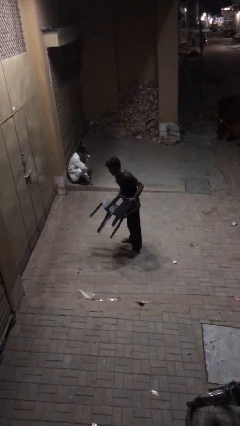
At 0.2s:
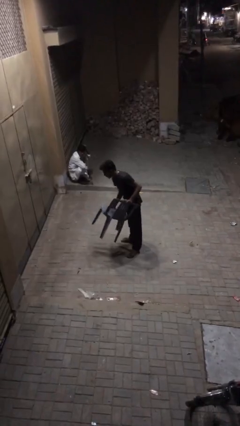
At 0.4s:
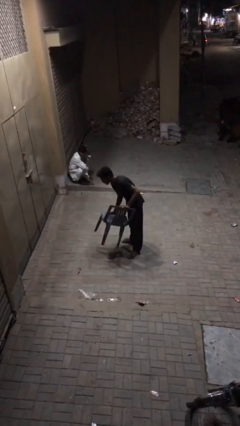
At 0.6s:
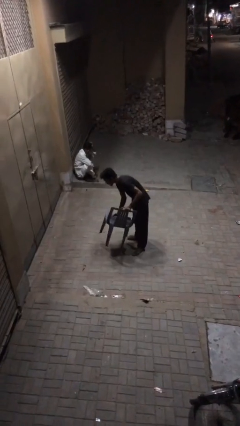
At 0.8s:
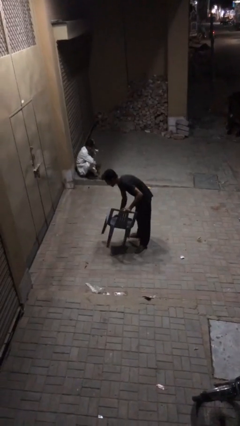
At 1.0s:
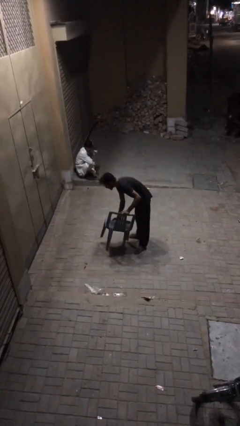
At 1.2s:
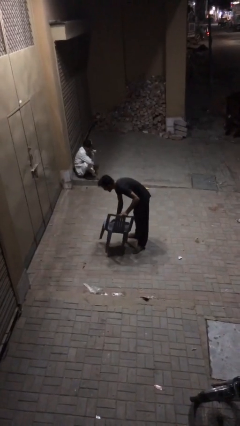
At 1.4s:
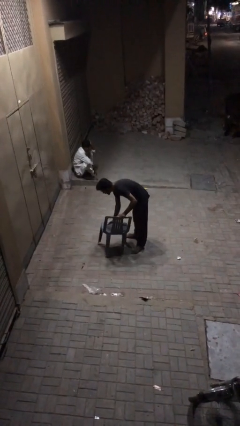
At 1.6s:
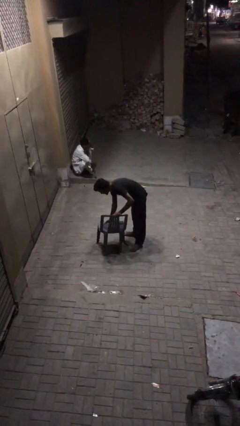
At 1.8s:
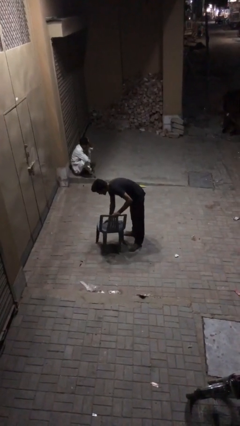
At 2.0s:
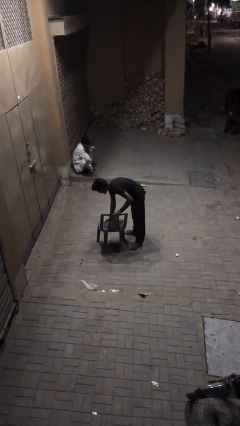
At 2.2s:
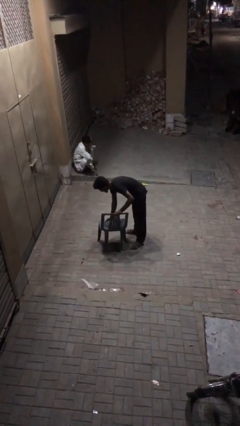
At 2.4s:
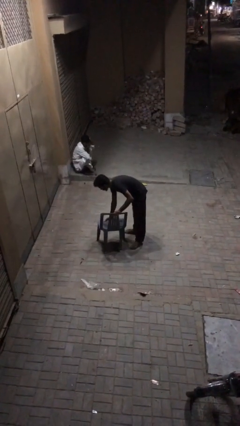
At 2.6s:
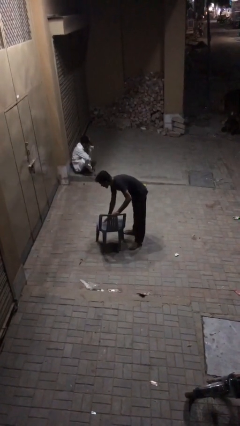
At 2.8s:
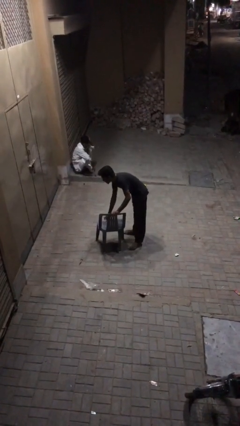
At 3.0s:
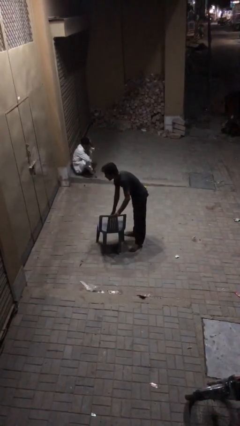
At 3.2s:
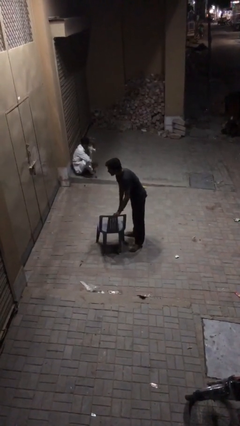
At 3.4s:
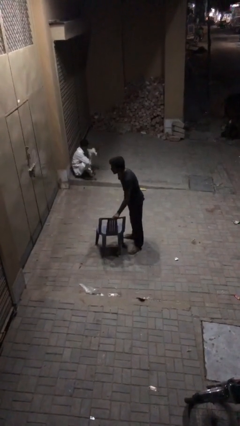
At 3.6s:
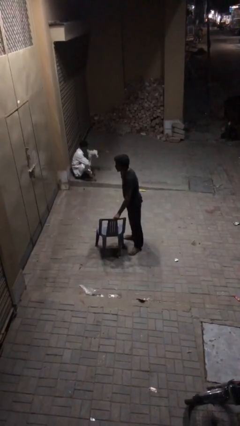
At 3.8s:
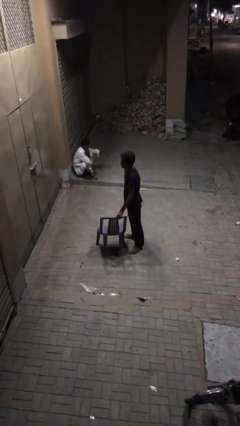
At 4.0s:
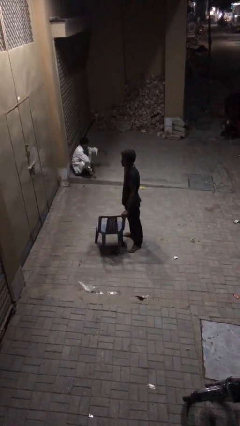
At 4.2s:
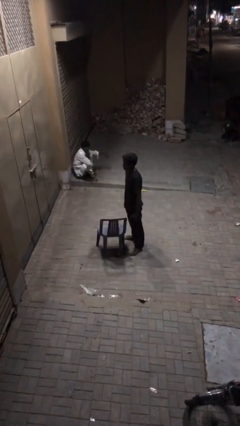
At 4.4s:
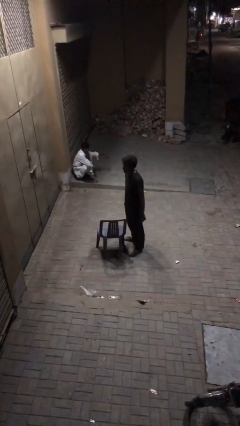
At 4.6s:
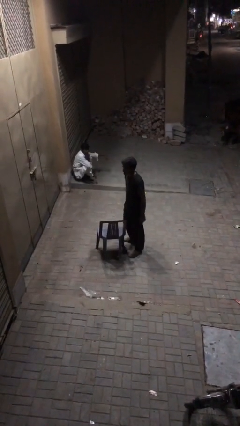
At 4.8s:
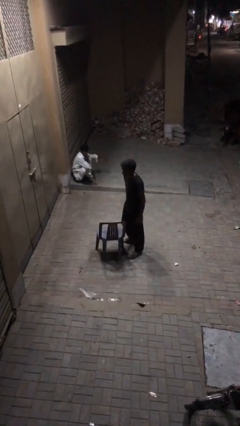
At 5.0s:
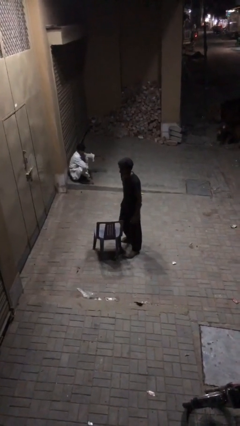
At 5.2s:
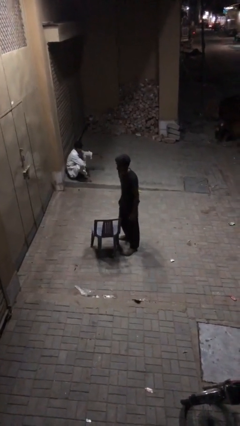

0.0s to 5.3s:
person puts down object on floor

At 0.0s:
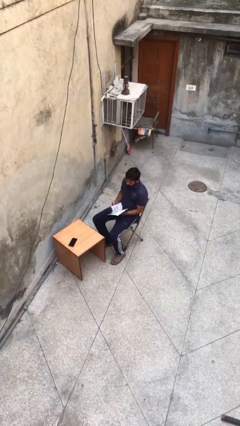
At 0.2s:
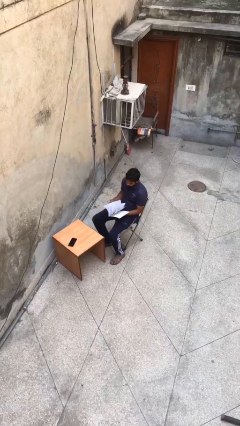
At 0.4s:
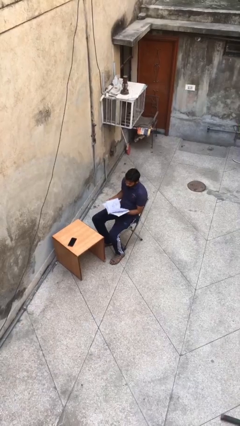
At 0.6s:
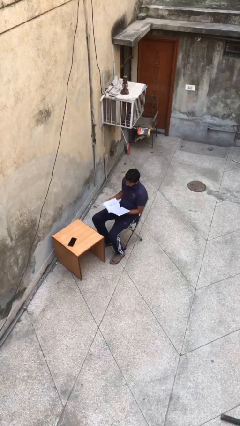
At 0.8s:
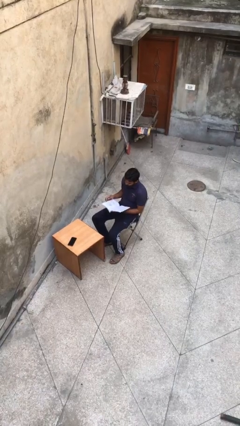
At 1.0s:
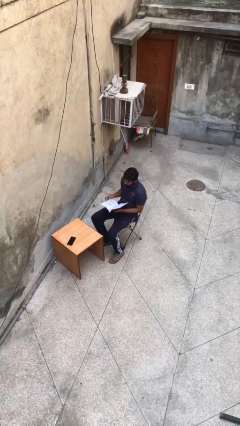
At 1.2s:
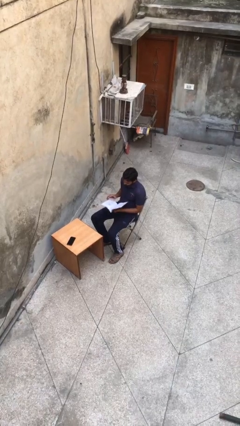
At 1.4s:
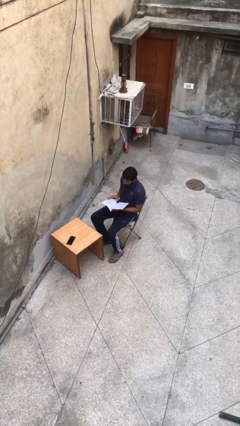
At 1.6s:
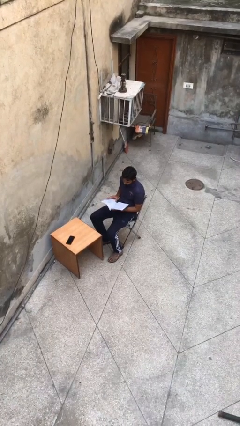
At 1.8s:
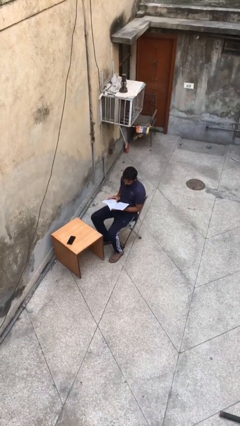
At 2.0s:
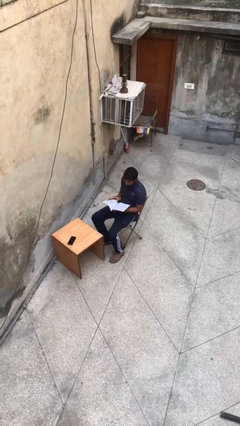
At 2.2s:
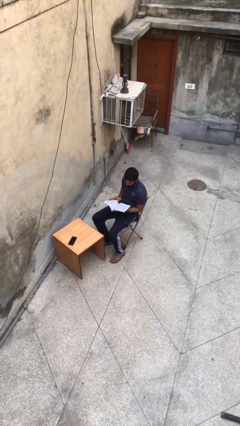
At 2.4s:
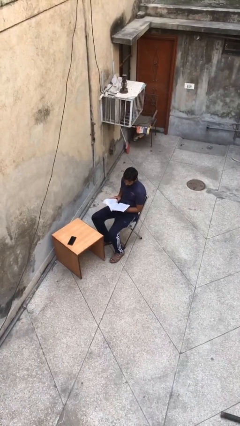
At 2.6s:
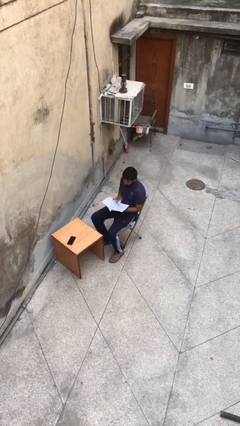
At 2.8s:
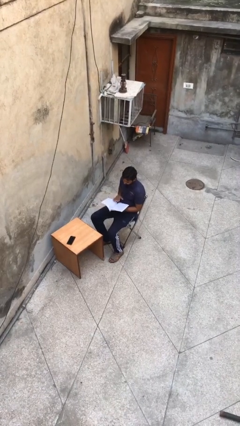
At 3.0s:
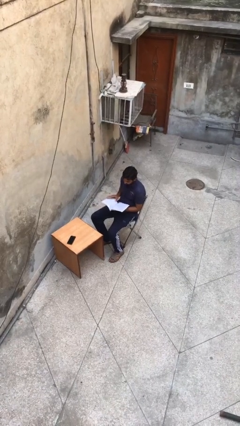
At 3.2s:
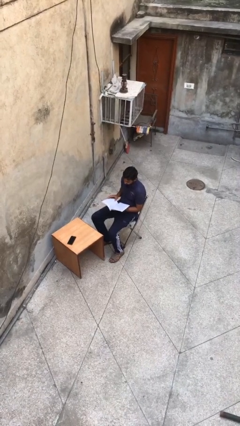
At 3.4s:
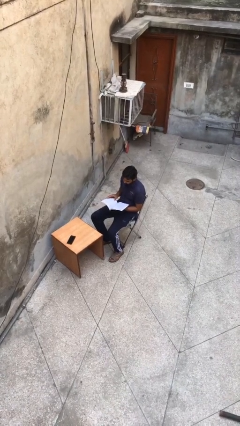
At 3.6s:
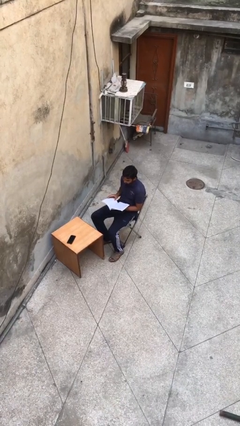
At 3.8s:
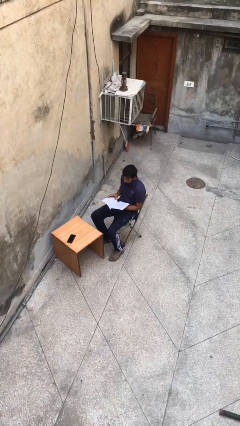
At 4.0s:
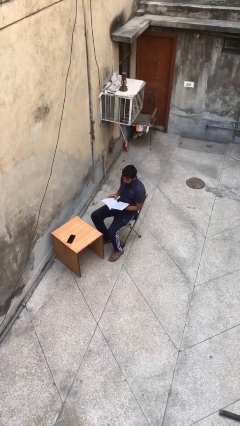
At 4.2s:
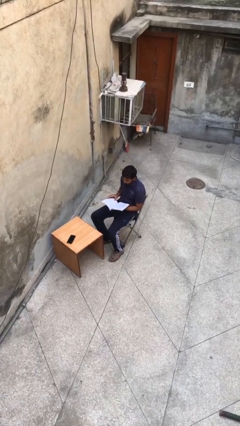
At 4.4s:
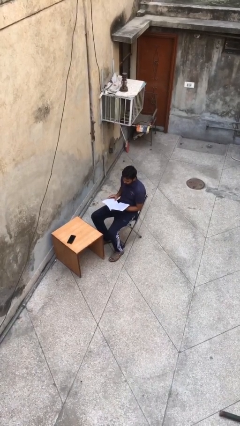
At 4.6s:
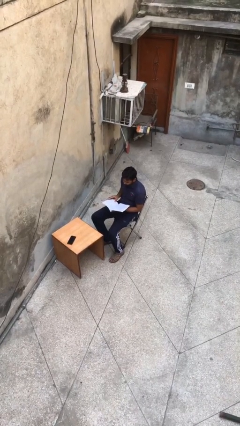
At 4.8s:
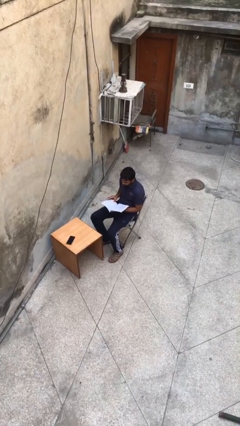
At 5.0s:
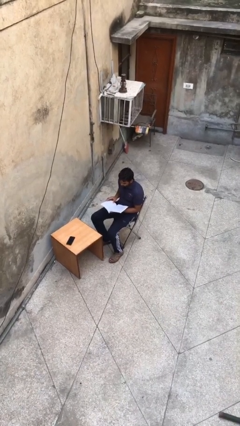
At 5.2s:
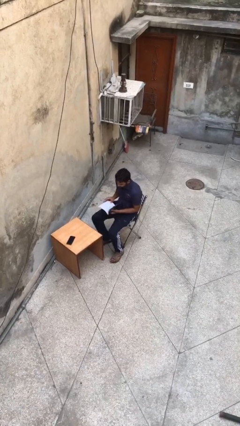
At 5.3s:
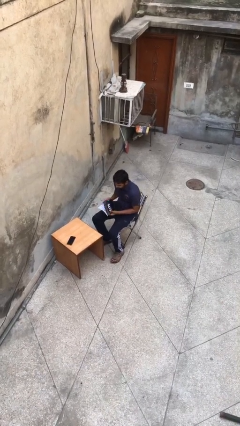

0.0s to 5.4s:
person reads document

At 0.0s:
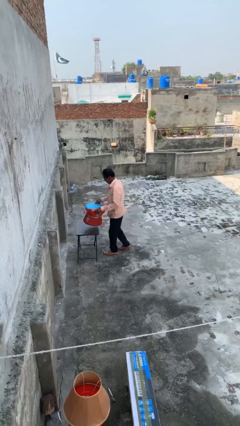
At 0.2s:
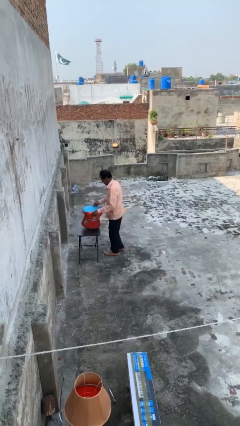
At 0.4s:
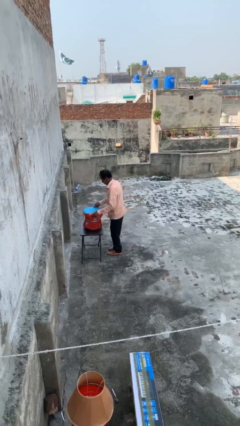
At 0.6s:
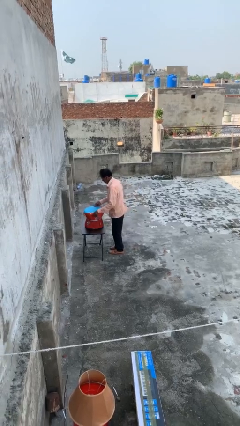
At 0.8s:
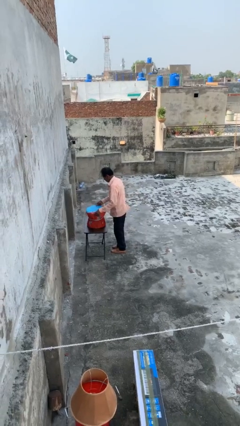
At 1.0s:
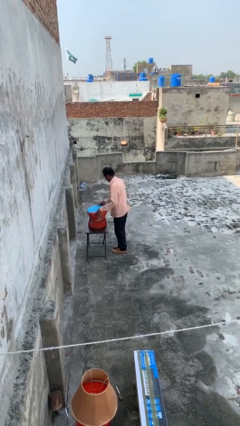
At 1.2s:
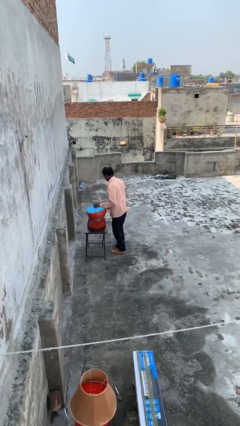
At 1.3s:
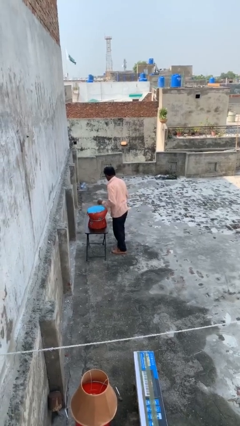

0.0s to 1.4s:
person puts down object on table

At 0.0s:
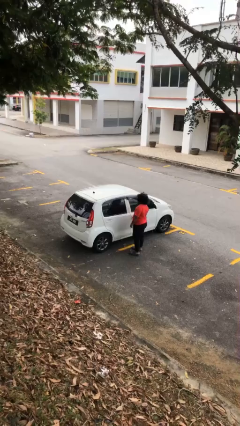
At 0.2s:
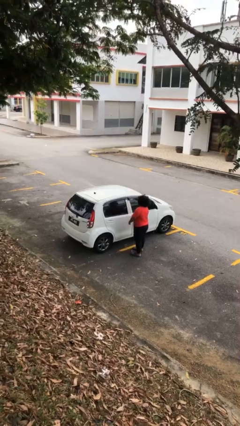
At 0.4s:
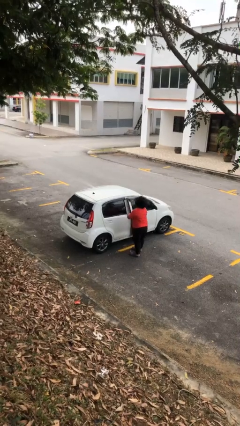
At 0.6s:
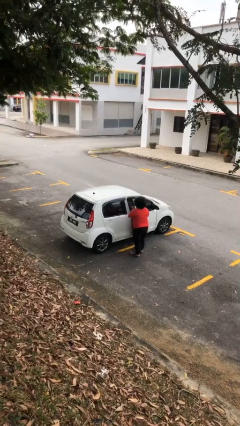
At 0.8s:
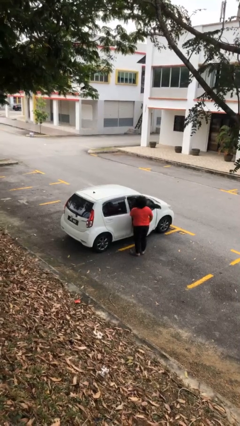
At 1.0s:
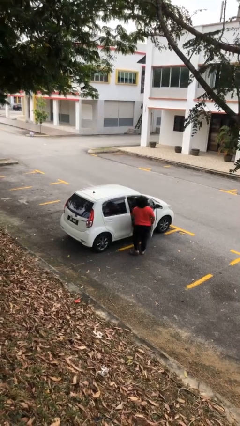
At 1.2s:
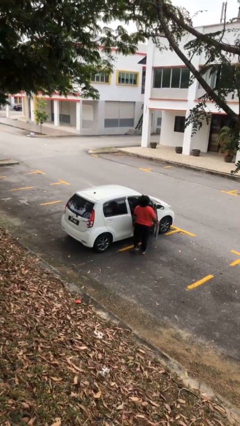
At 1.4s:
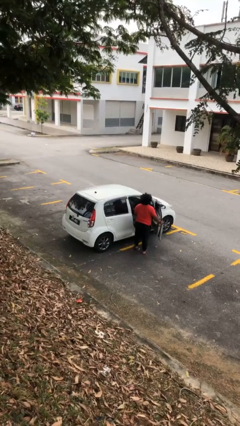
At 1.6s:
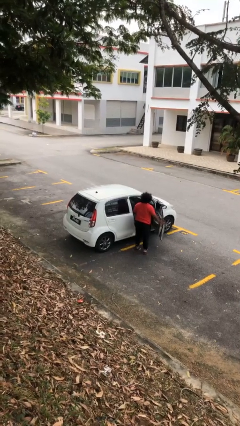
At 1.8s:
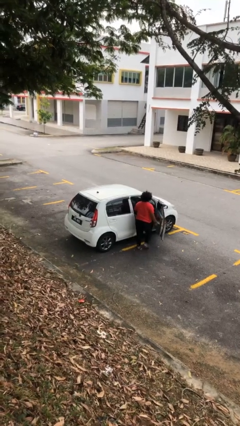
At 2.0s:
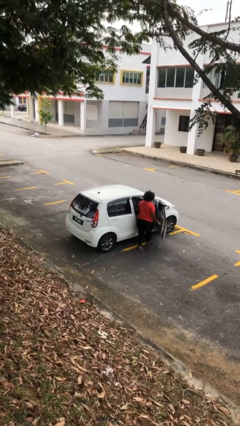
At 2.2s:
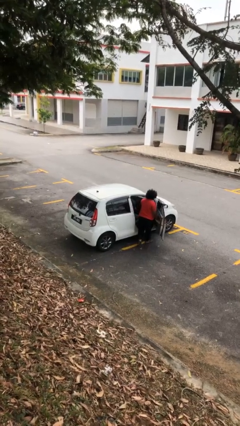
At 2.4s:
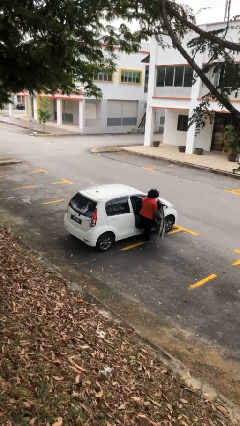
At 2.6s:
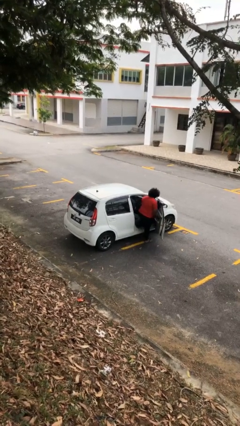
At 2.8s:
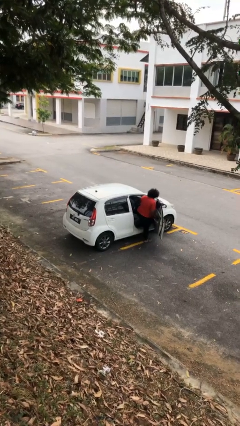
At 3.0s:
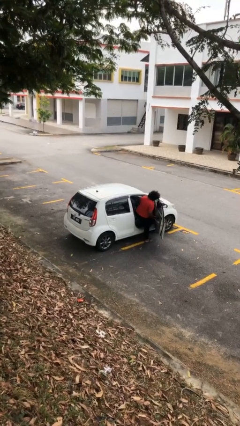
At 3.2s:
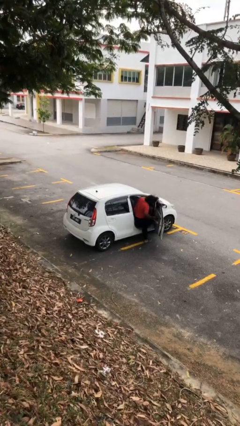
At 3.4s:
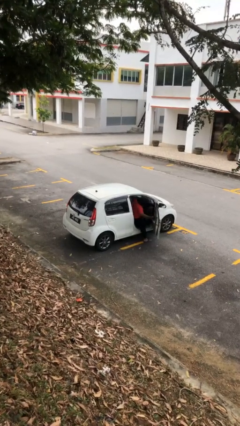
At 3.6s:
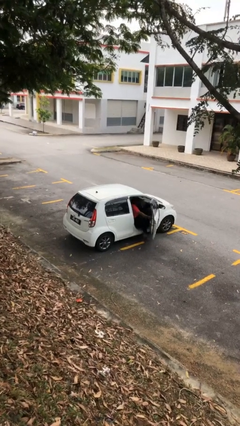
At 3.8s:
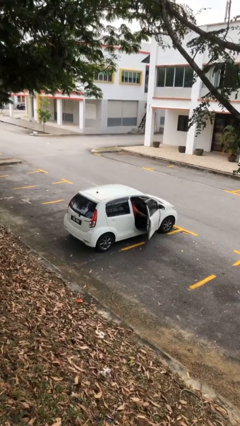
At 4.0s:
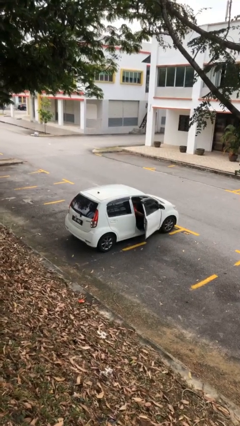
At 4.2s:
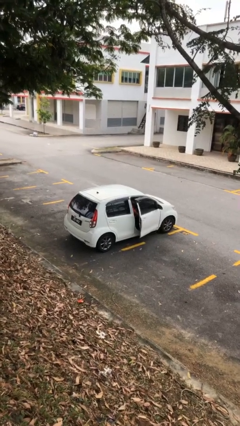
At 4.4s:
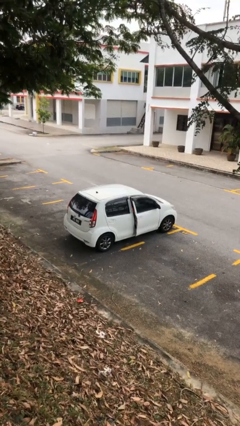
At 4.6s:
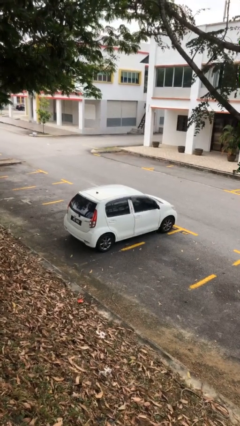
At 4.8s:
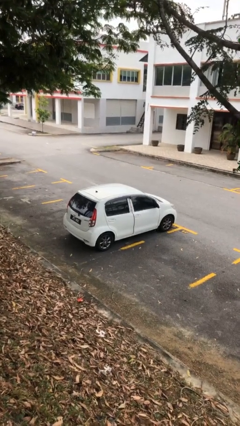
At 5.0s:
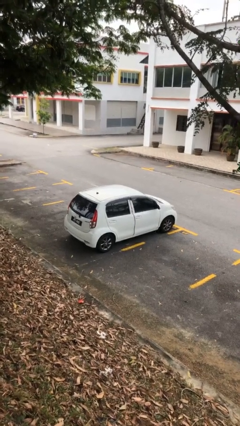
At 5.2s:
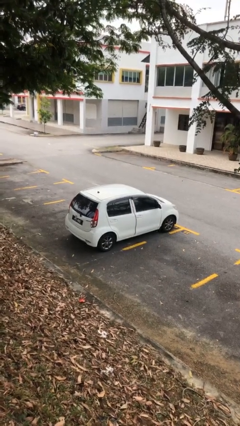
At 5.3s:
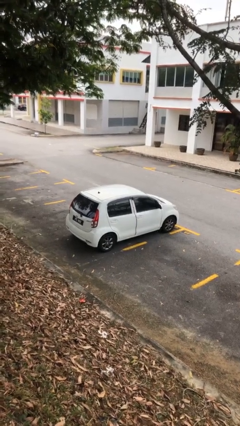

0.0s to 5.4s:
car picks up person

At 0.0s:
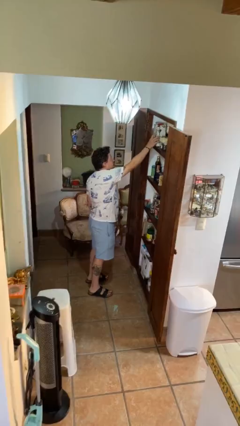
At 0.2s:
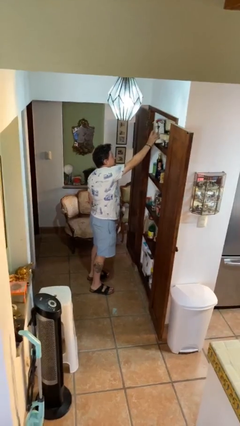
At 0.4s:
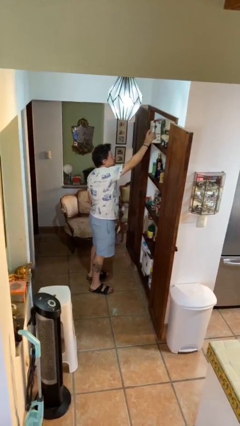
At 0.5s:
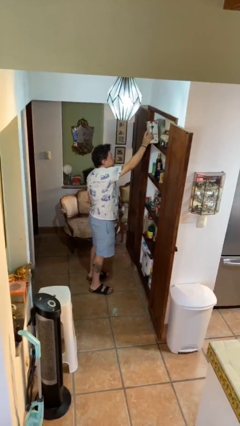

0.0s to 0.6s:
person picks up object from shelf
